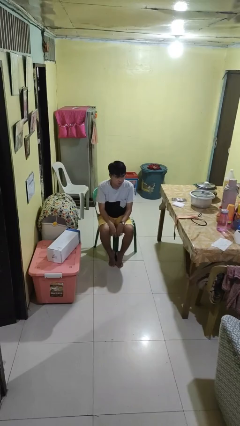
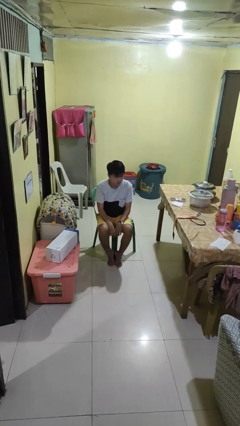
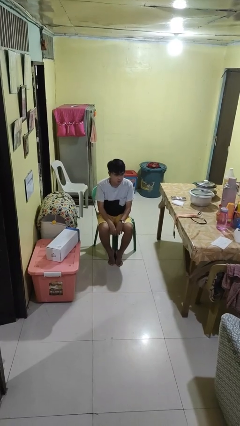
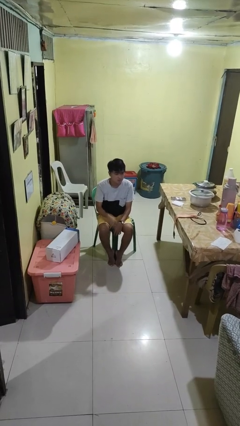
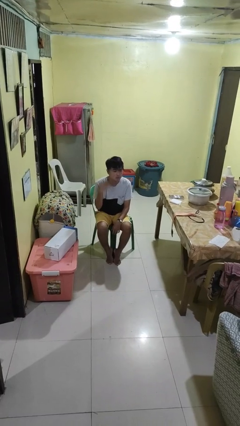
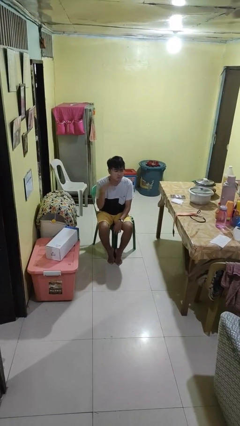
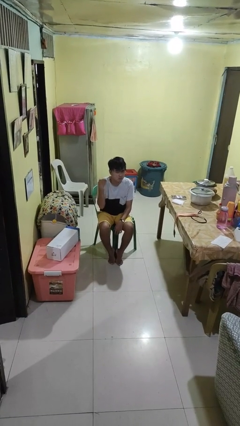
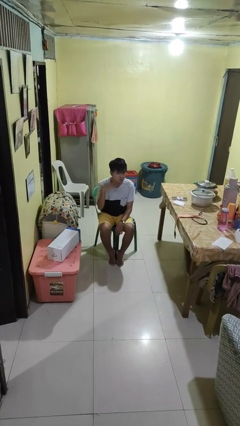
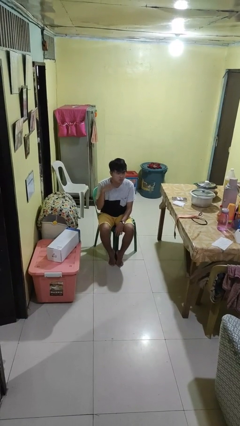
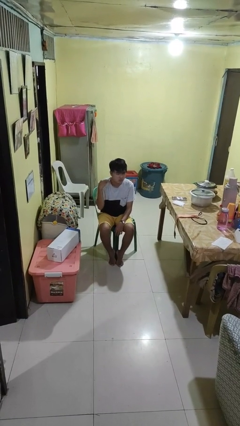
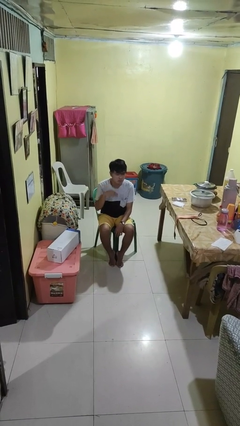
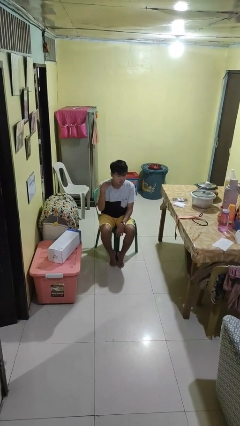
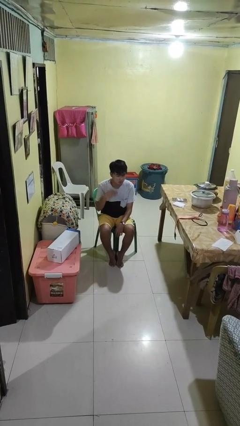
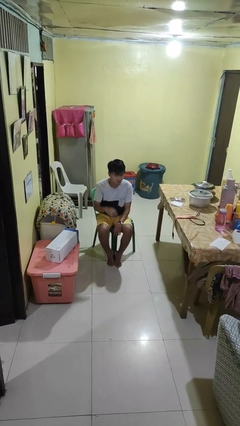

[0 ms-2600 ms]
person gestures cut

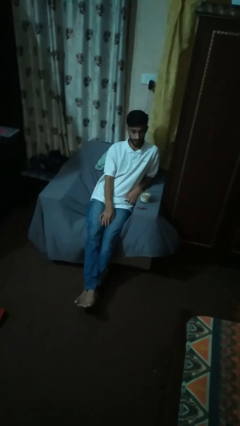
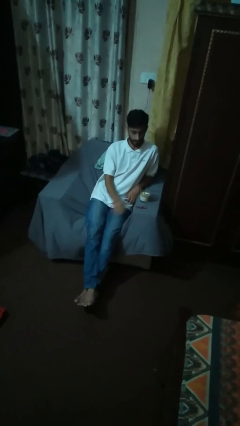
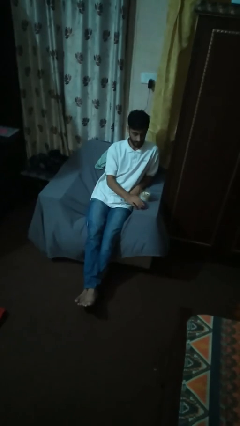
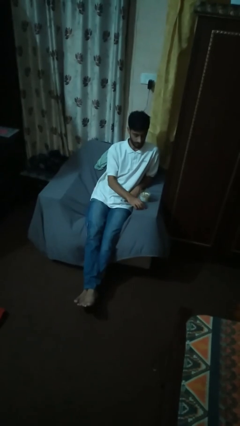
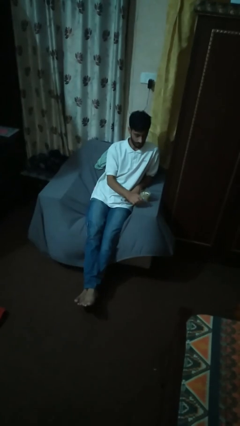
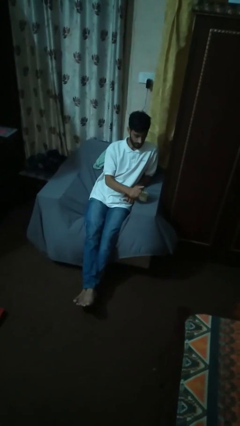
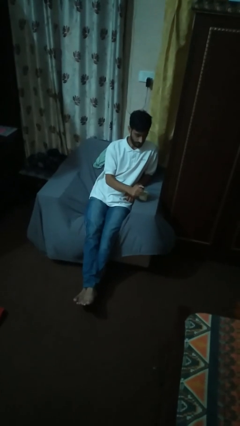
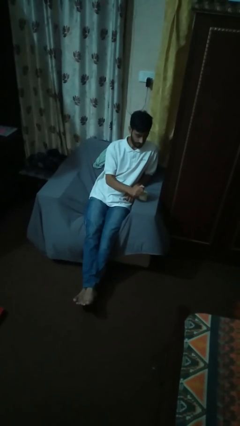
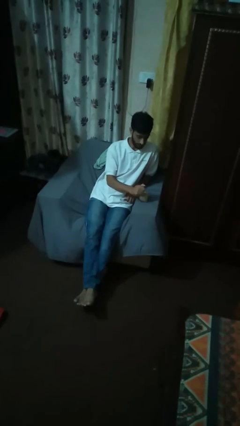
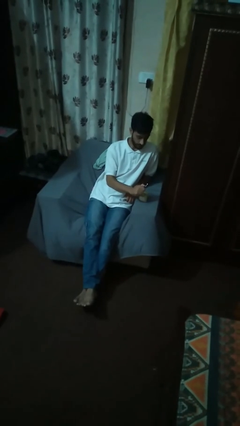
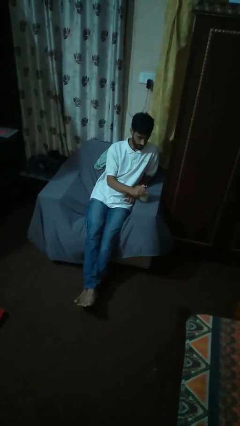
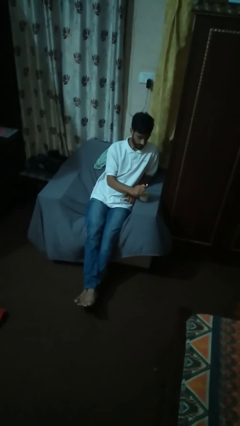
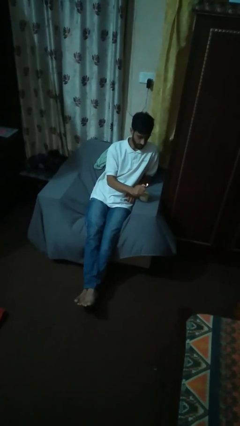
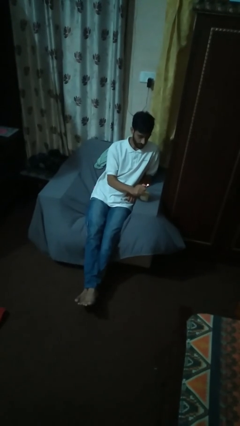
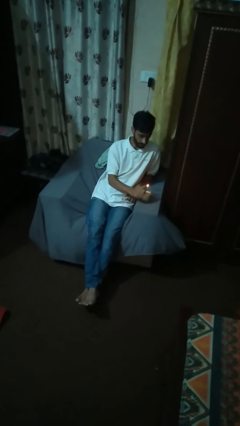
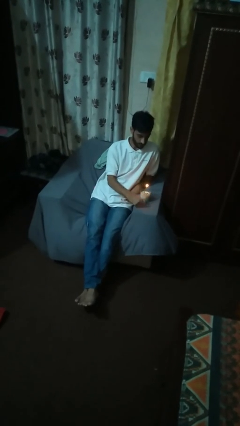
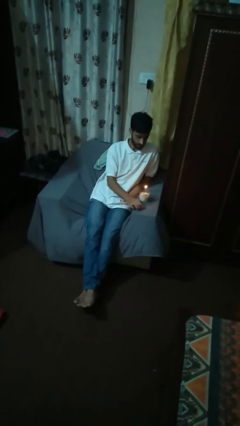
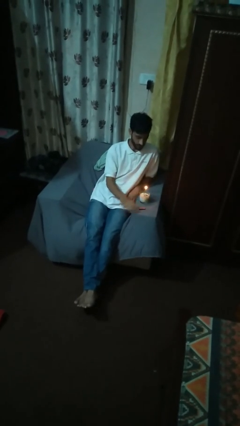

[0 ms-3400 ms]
person lights candle

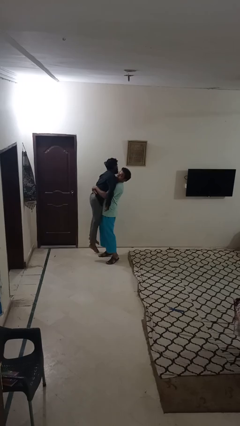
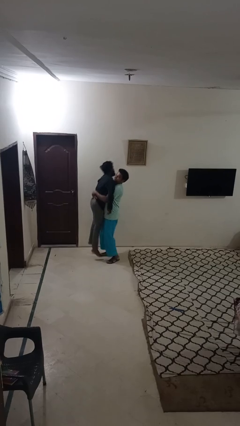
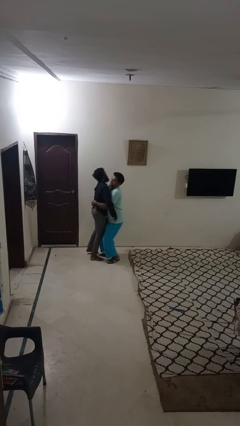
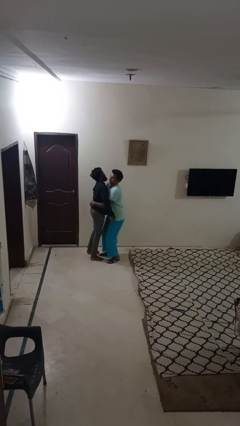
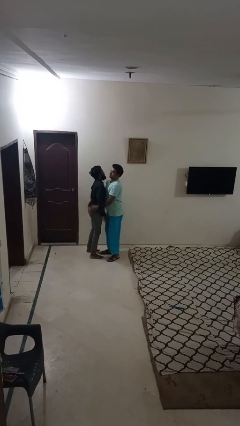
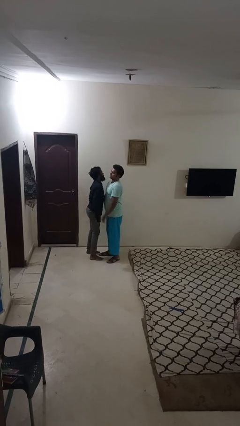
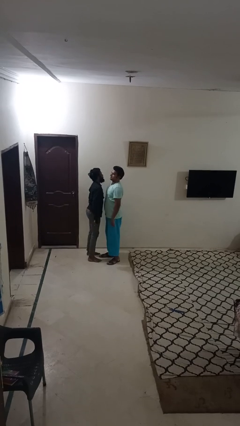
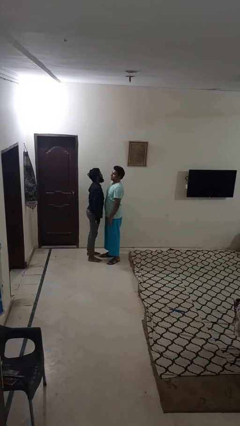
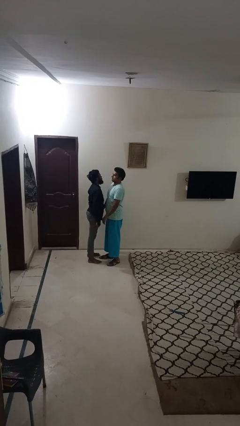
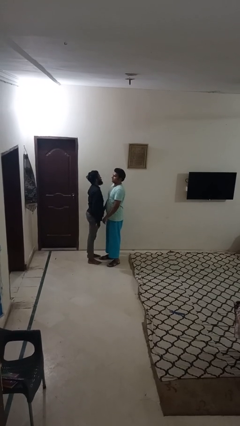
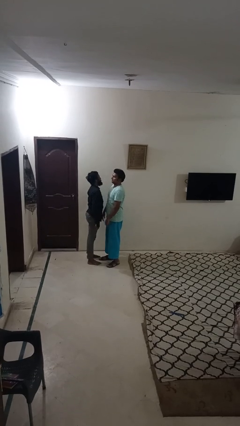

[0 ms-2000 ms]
person puts down person

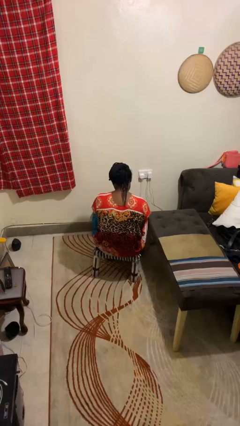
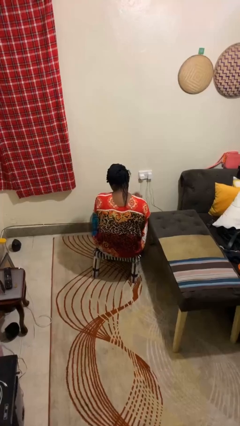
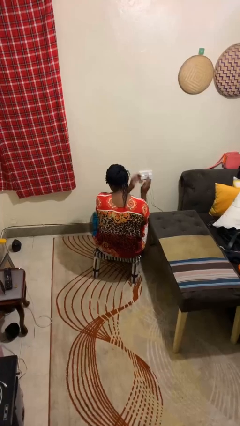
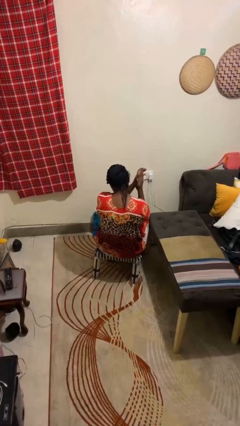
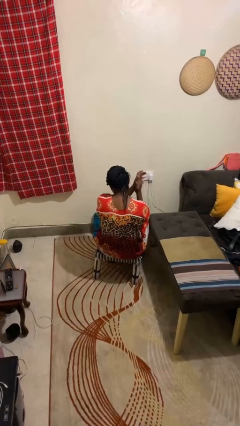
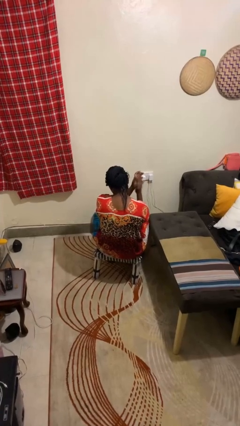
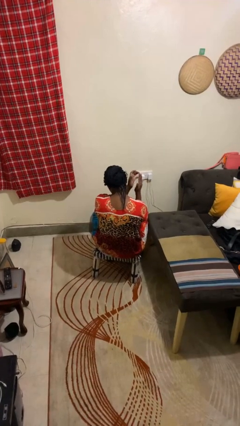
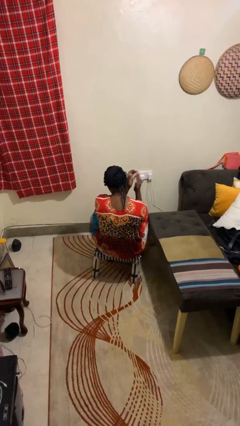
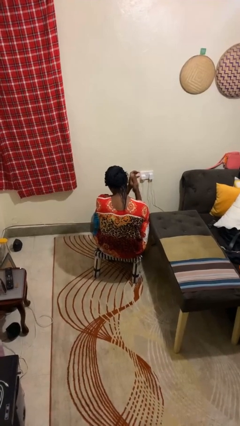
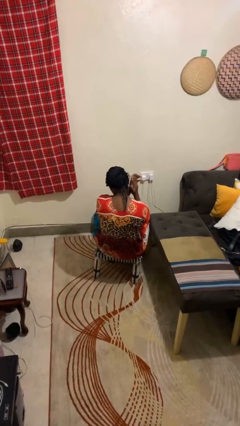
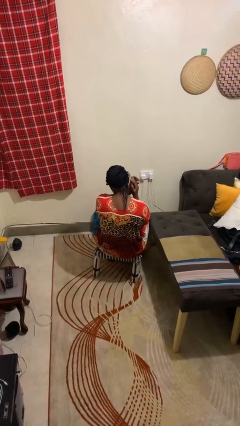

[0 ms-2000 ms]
person claps hands

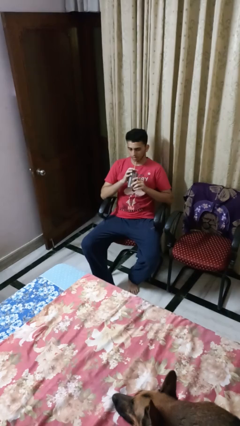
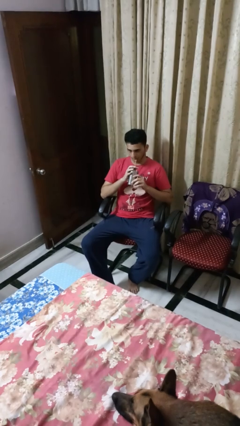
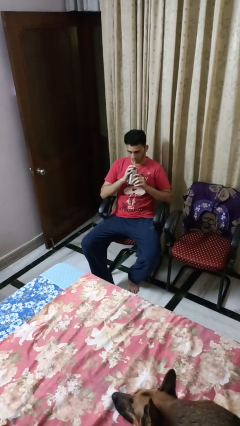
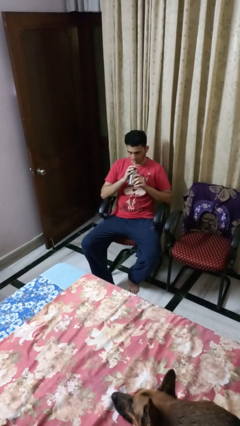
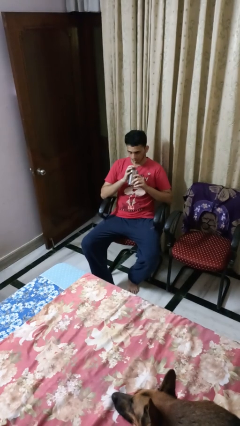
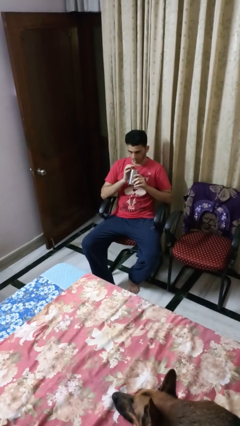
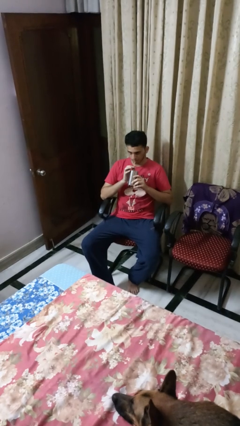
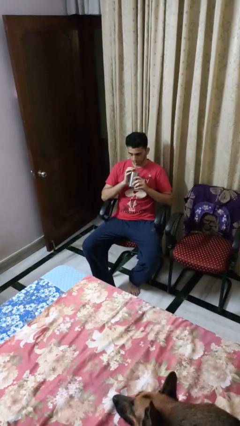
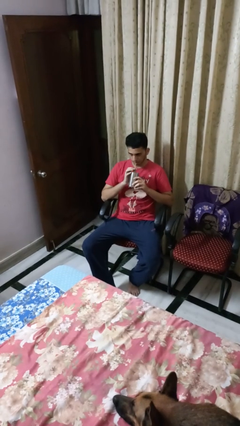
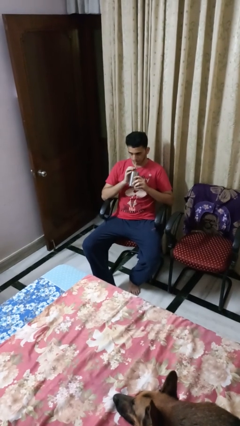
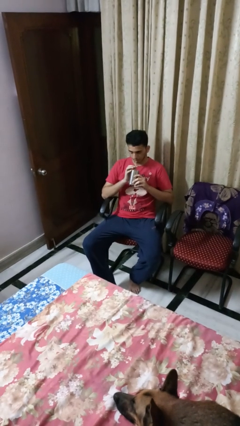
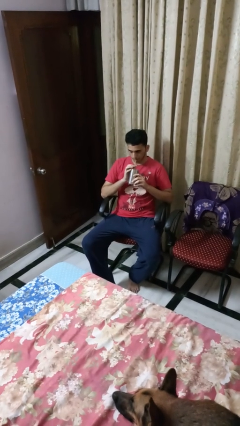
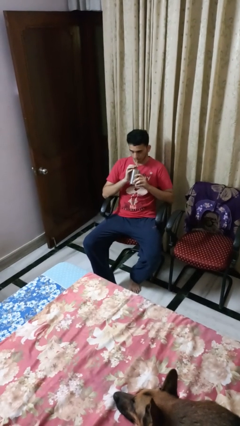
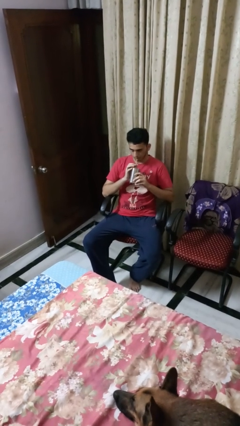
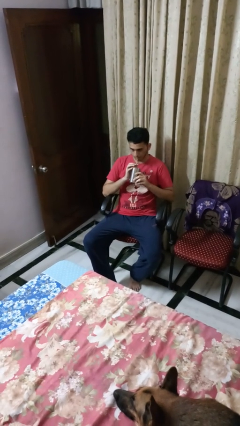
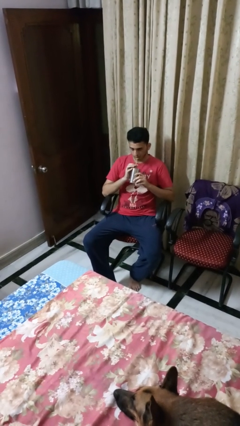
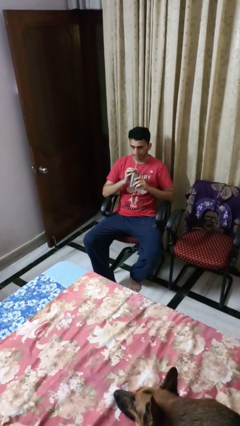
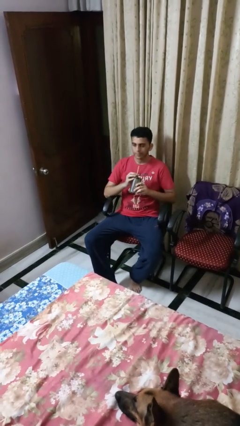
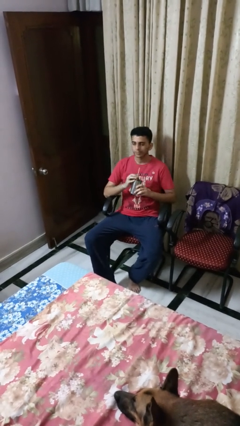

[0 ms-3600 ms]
person drinks from straw

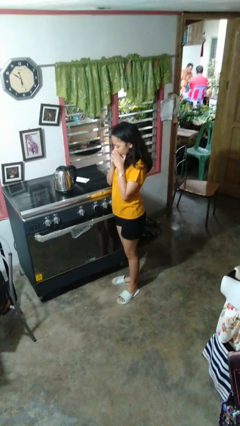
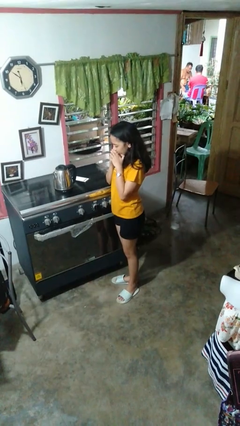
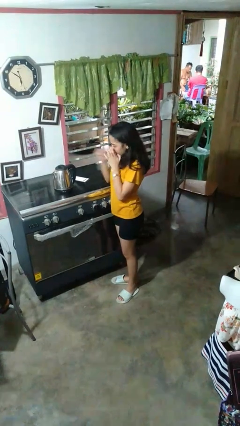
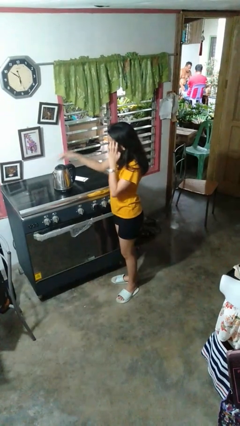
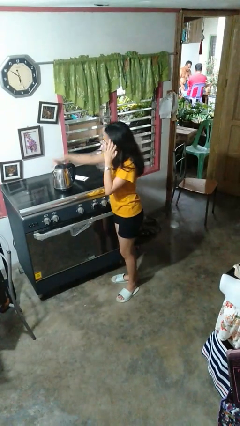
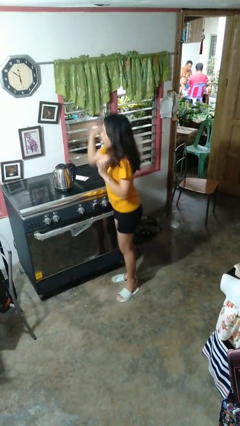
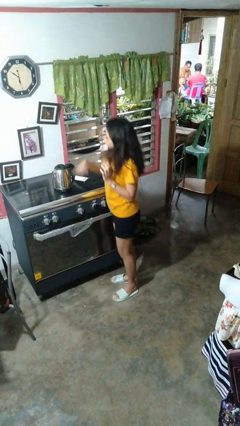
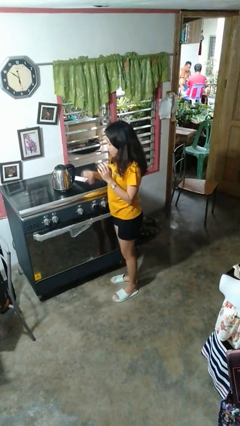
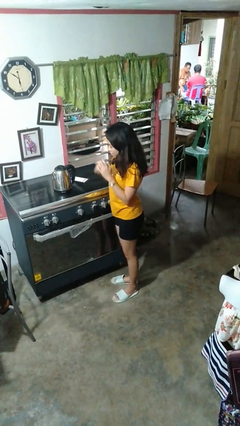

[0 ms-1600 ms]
person burns hand

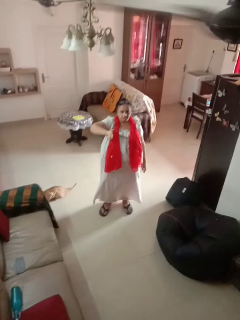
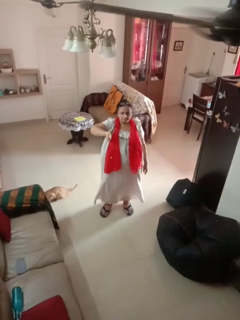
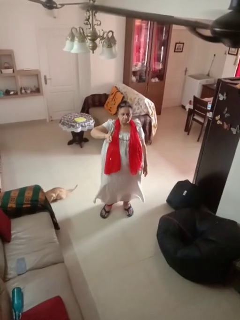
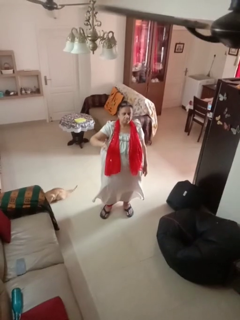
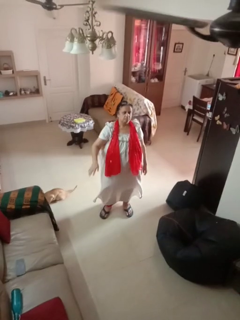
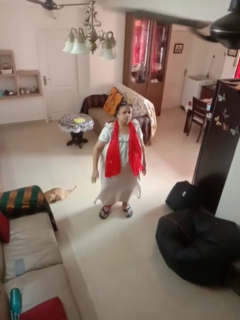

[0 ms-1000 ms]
person gestures swipe right

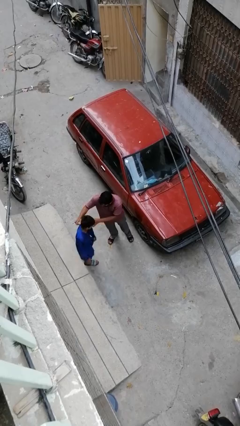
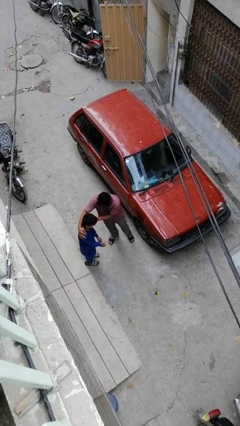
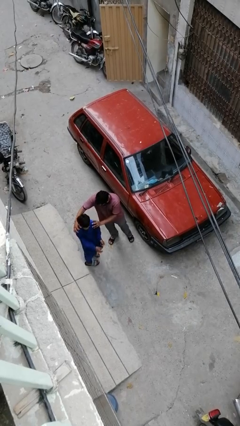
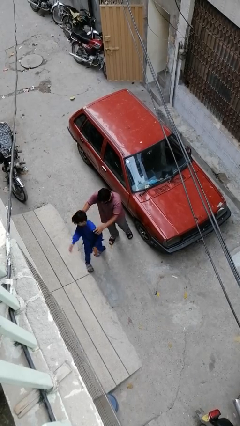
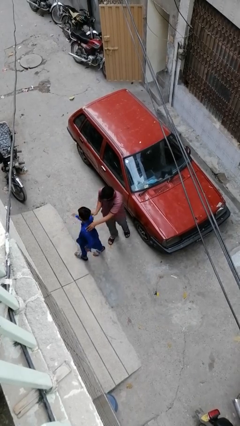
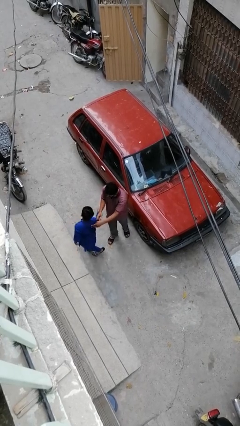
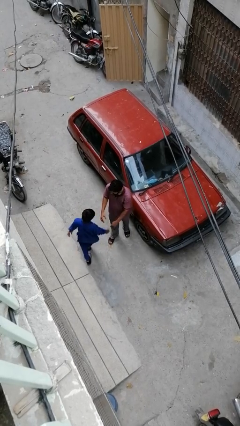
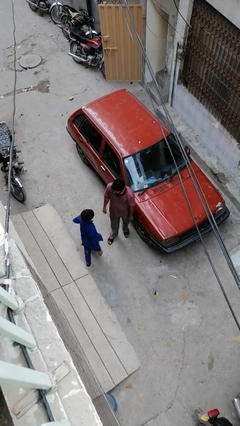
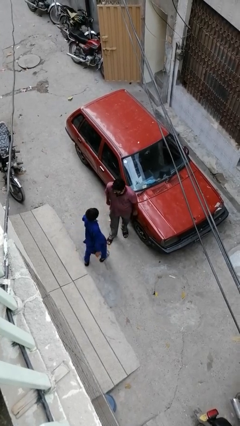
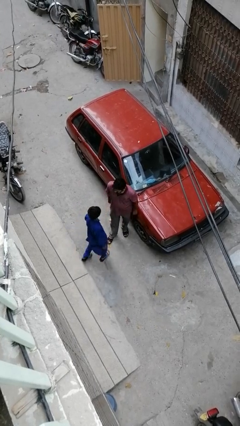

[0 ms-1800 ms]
person spins person around
